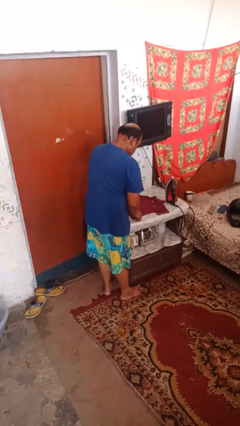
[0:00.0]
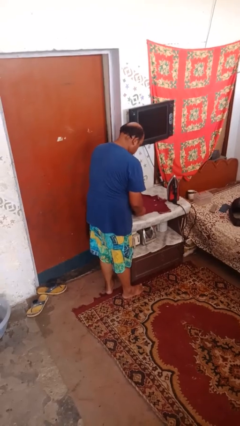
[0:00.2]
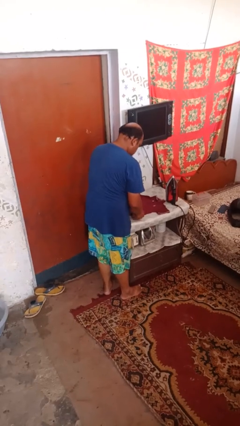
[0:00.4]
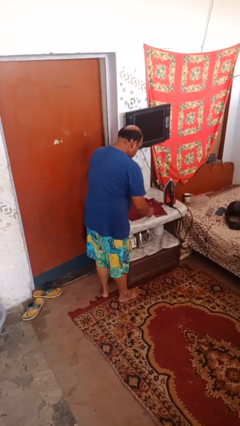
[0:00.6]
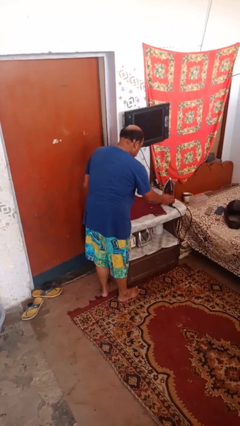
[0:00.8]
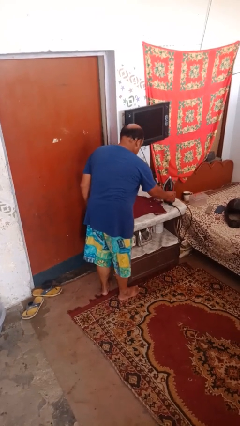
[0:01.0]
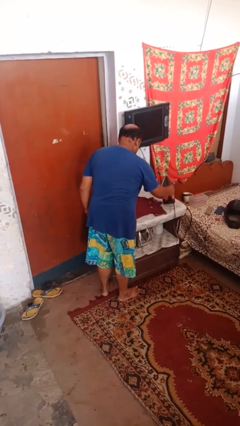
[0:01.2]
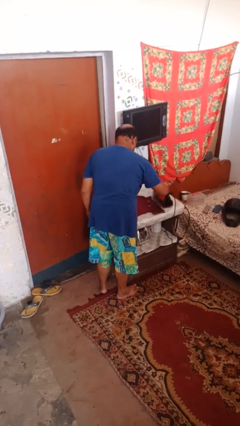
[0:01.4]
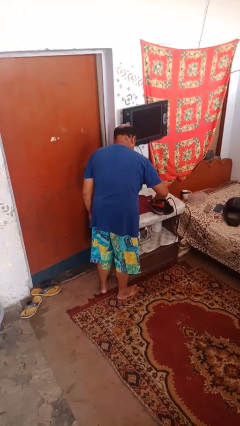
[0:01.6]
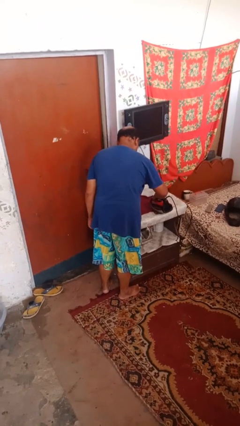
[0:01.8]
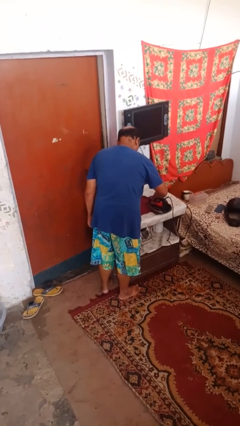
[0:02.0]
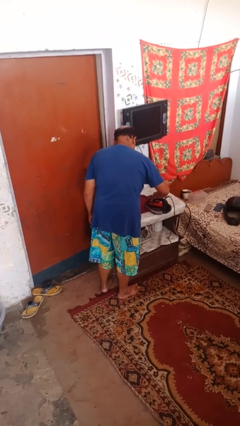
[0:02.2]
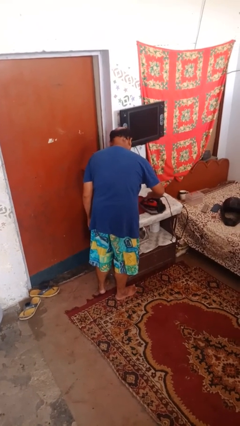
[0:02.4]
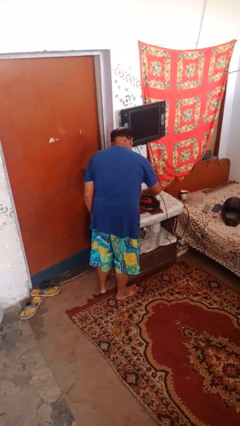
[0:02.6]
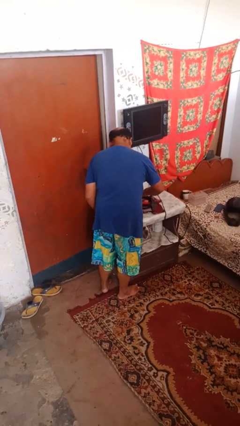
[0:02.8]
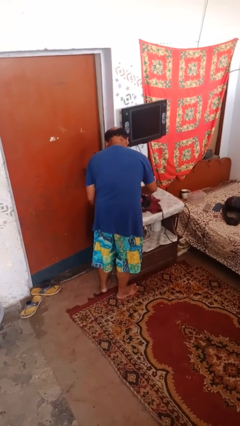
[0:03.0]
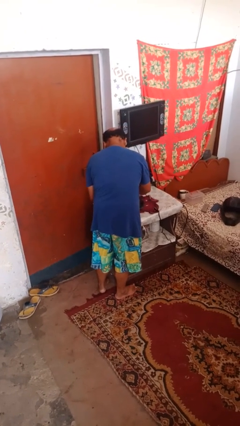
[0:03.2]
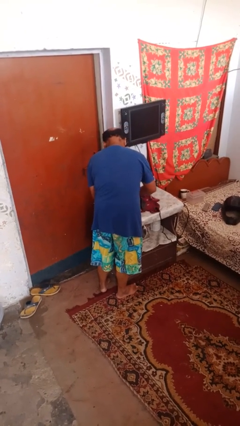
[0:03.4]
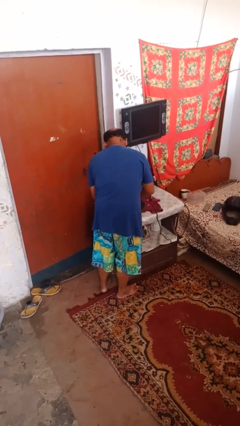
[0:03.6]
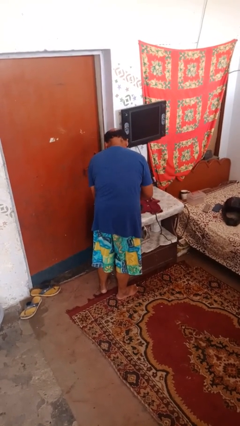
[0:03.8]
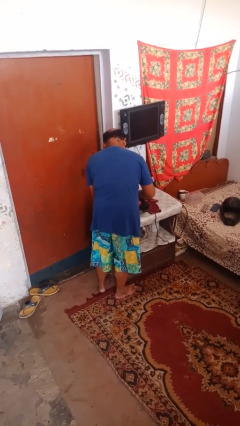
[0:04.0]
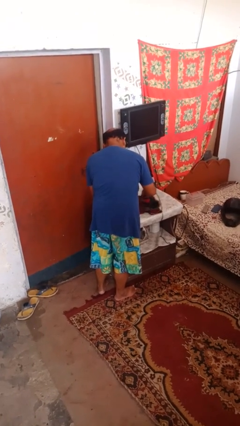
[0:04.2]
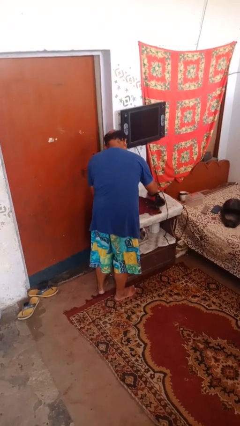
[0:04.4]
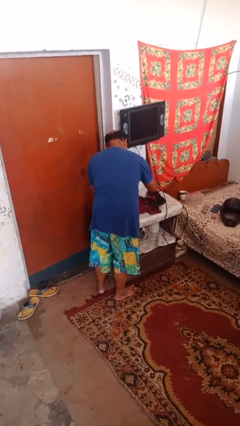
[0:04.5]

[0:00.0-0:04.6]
person irons clothes

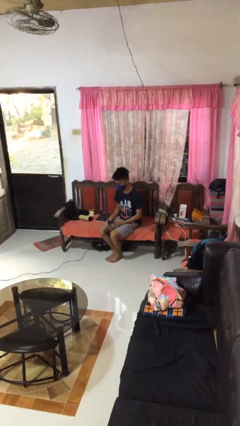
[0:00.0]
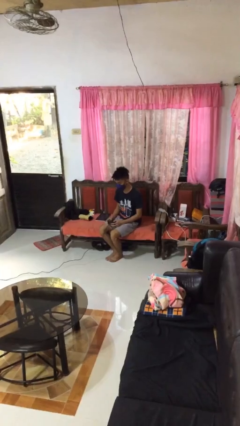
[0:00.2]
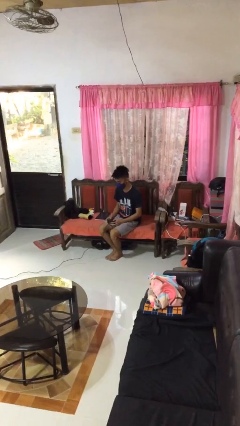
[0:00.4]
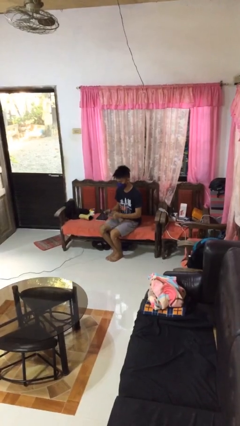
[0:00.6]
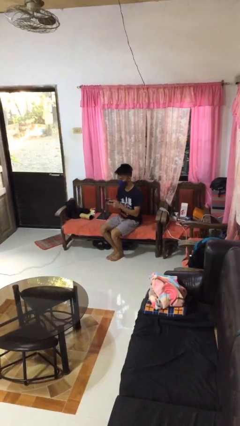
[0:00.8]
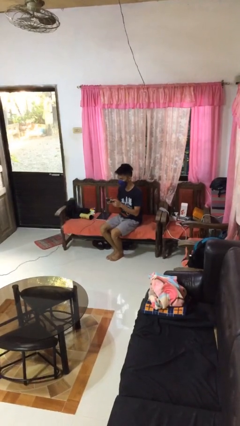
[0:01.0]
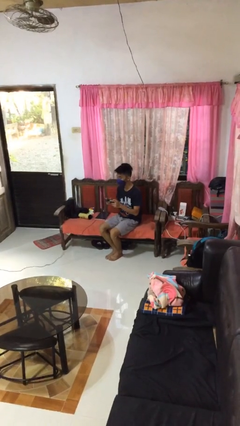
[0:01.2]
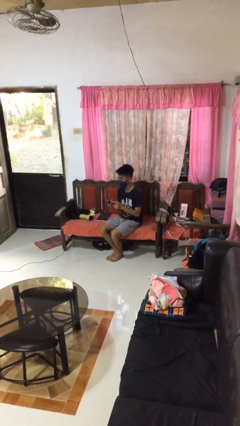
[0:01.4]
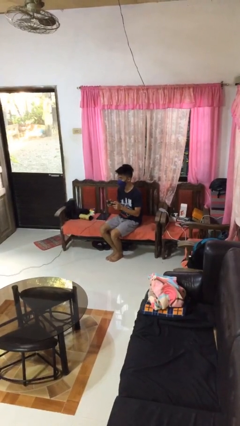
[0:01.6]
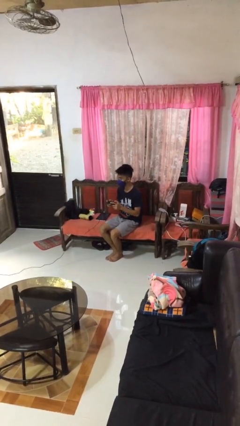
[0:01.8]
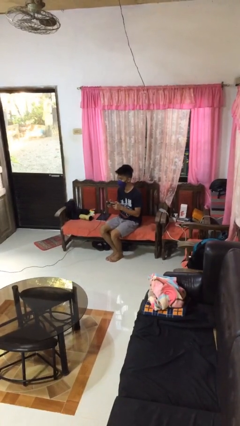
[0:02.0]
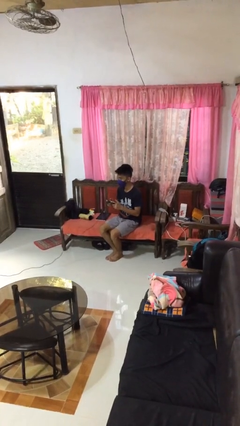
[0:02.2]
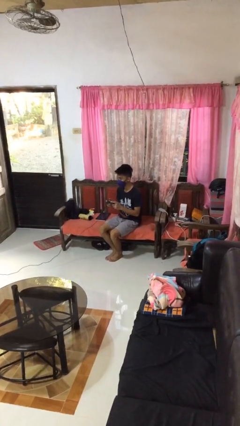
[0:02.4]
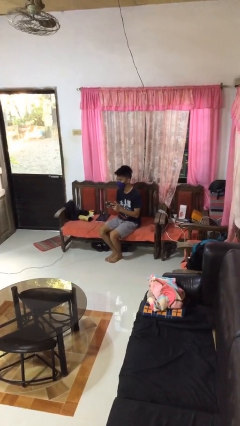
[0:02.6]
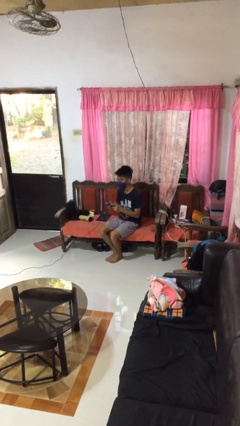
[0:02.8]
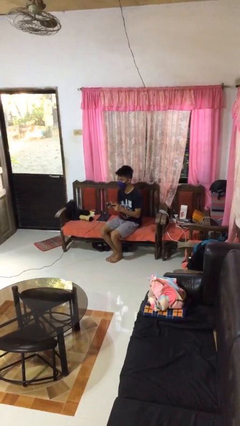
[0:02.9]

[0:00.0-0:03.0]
person interacts with handheld game

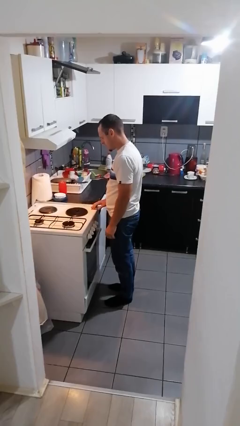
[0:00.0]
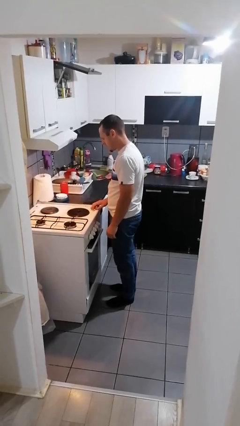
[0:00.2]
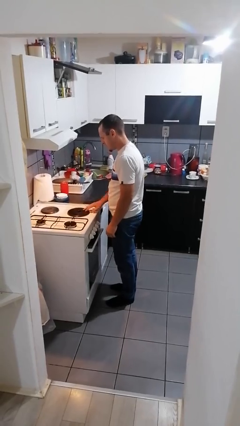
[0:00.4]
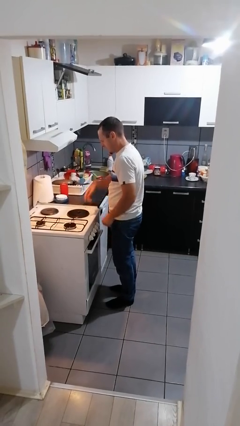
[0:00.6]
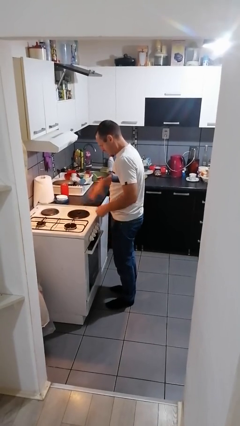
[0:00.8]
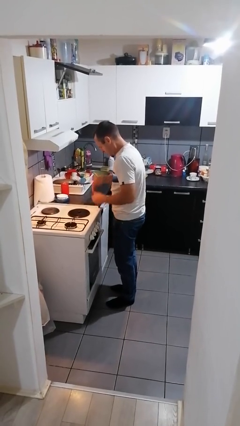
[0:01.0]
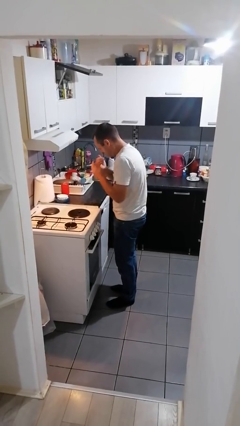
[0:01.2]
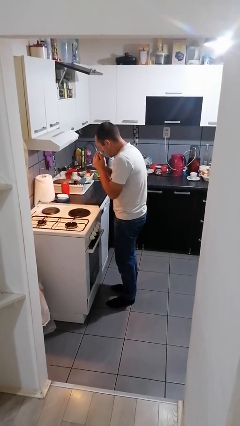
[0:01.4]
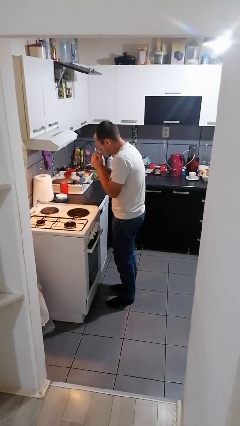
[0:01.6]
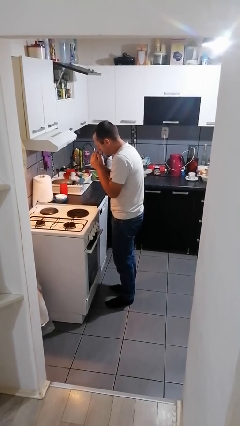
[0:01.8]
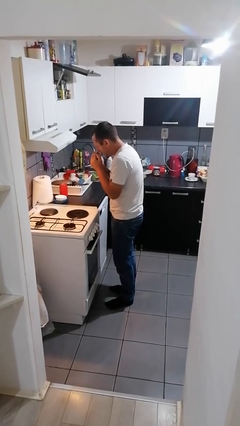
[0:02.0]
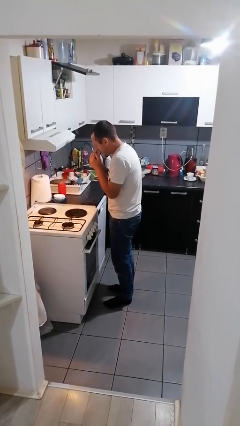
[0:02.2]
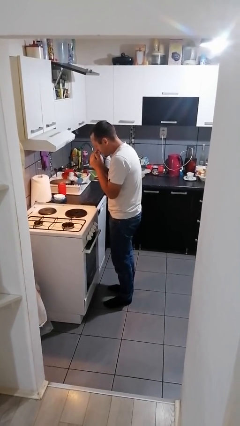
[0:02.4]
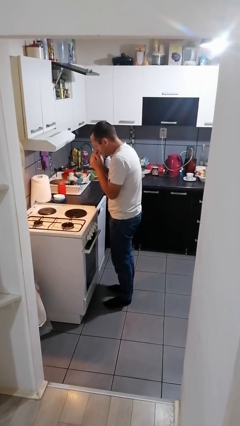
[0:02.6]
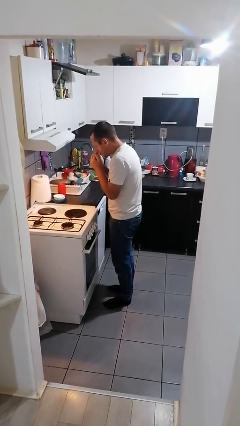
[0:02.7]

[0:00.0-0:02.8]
person burns hand

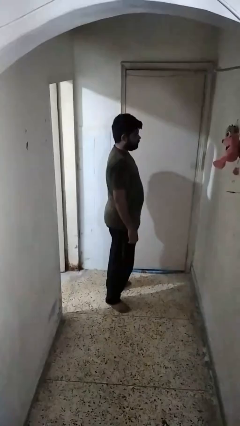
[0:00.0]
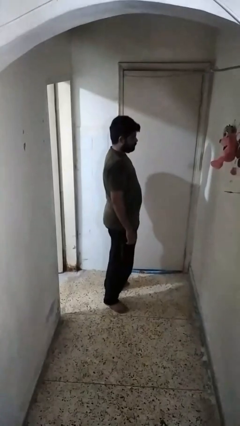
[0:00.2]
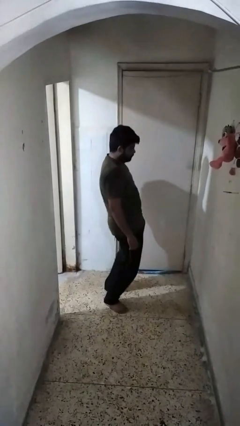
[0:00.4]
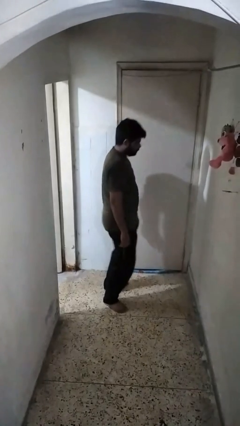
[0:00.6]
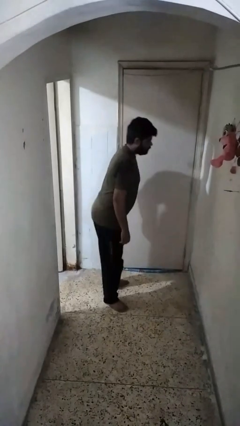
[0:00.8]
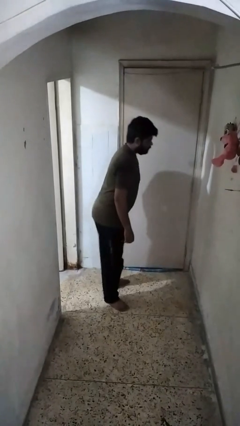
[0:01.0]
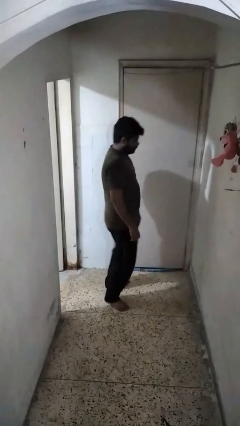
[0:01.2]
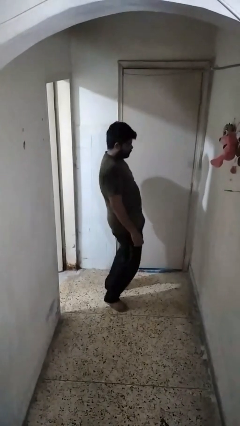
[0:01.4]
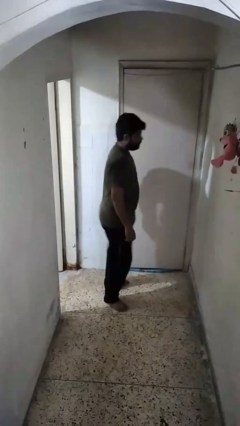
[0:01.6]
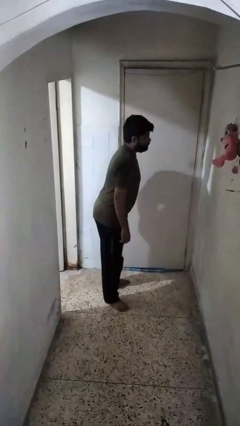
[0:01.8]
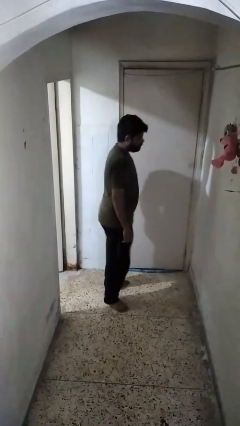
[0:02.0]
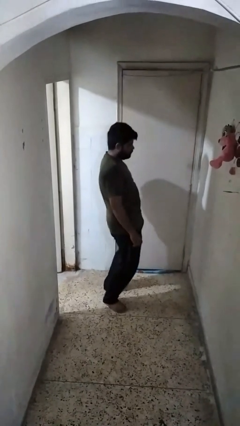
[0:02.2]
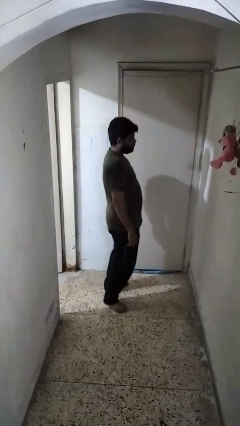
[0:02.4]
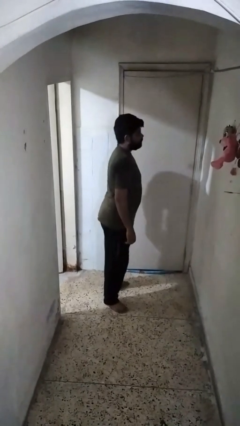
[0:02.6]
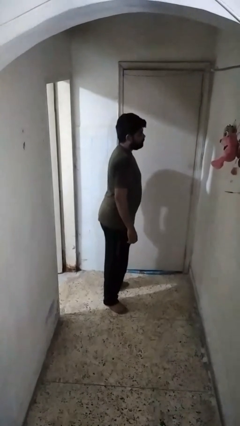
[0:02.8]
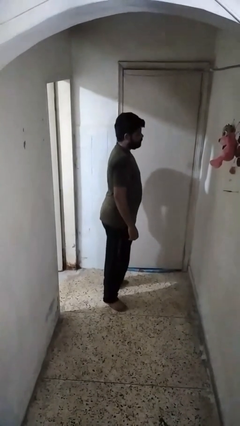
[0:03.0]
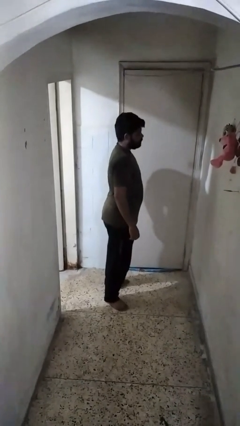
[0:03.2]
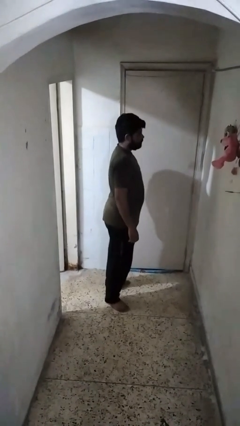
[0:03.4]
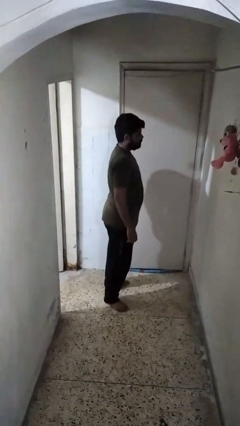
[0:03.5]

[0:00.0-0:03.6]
person wiggles hips

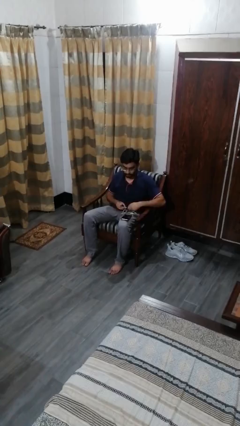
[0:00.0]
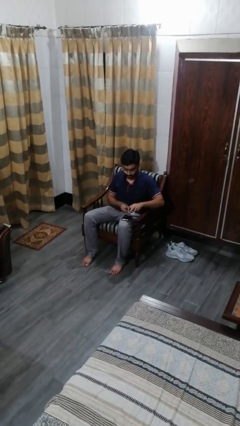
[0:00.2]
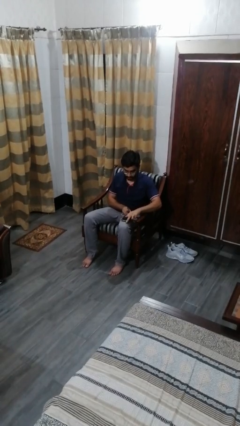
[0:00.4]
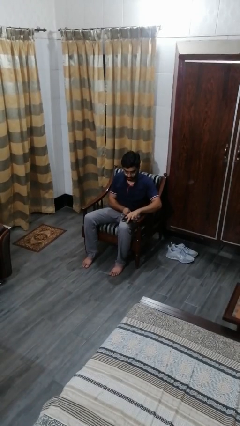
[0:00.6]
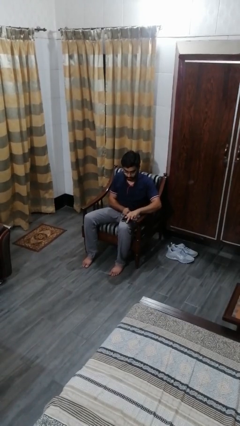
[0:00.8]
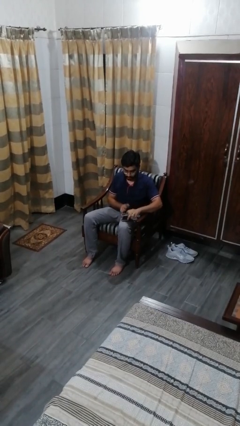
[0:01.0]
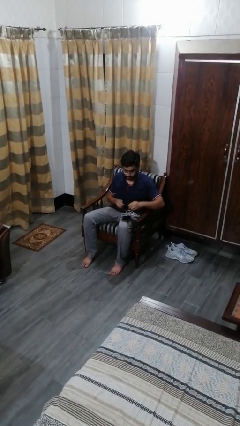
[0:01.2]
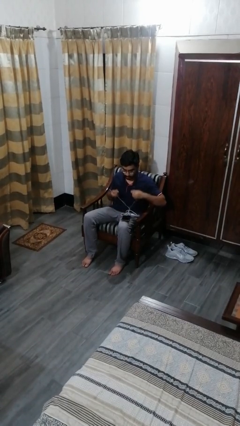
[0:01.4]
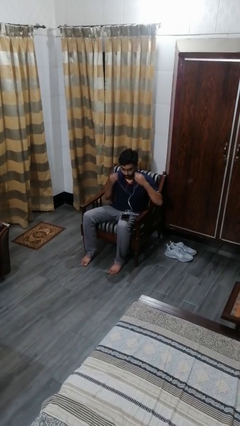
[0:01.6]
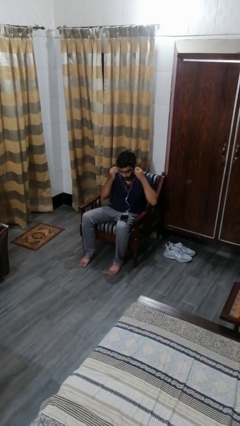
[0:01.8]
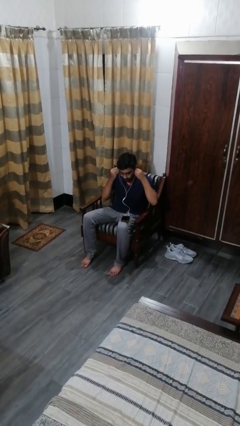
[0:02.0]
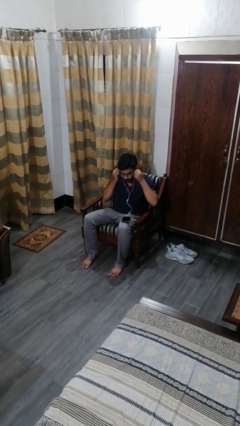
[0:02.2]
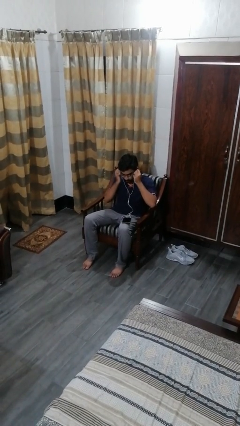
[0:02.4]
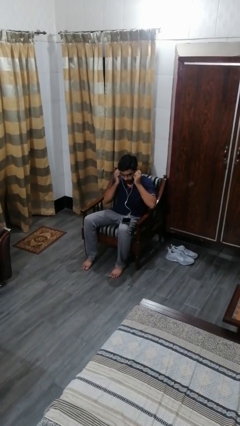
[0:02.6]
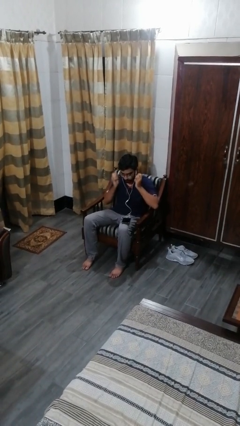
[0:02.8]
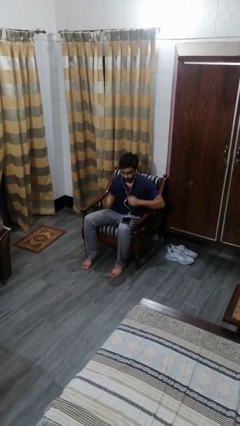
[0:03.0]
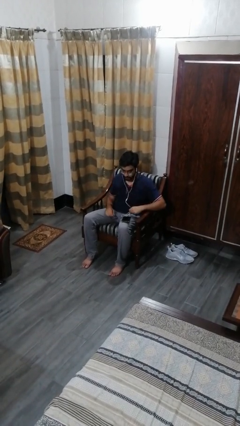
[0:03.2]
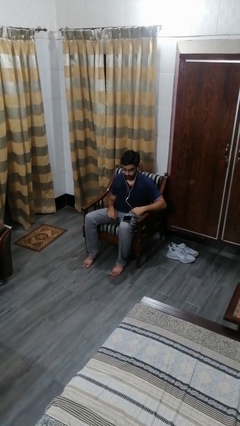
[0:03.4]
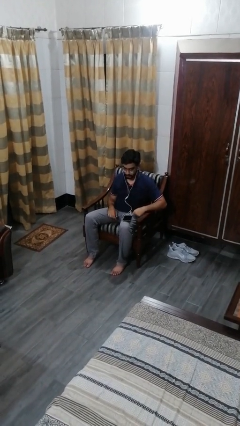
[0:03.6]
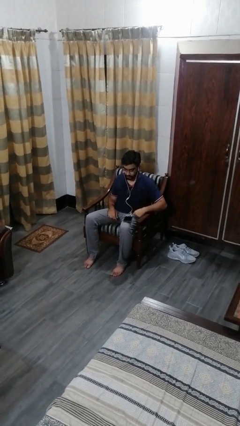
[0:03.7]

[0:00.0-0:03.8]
person puts on headphones
